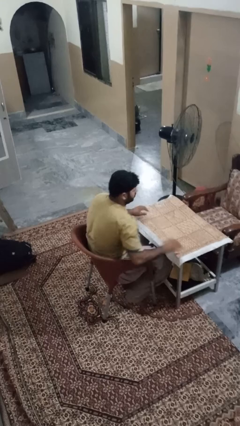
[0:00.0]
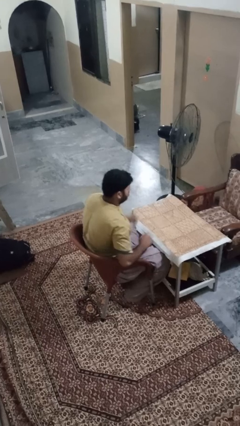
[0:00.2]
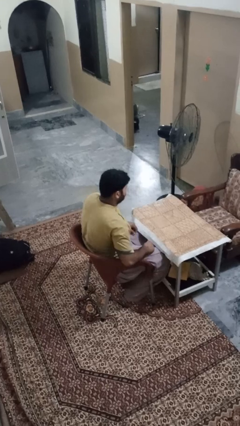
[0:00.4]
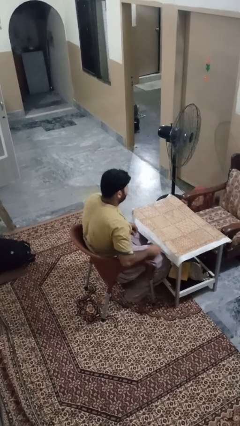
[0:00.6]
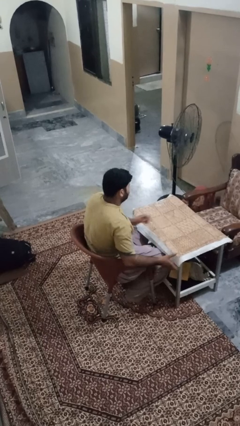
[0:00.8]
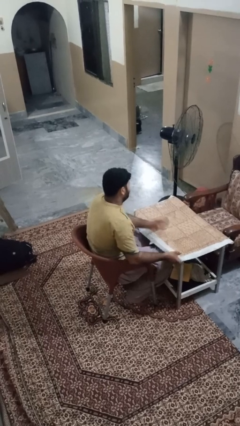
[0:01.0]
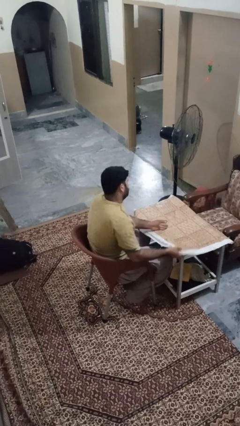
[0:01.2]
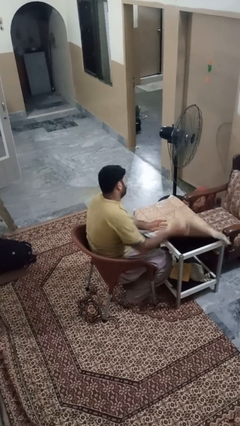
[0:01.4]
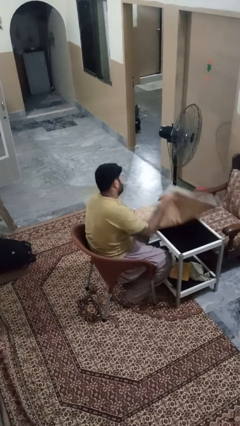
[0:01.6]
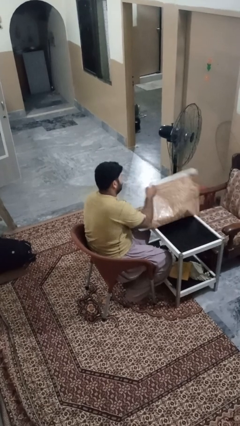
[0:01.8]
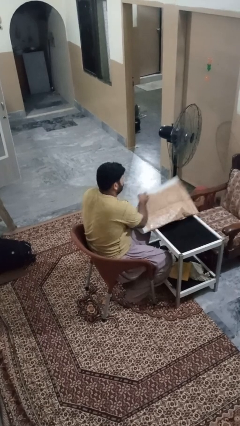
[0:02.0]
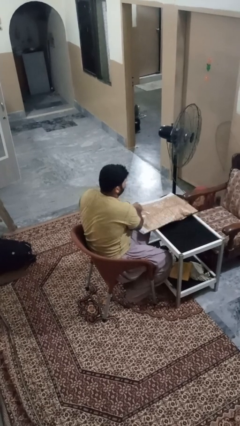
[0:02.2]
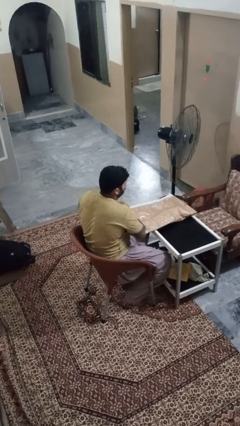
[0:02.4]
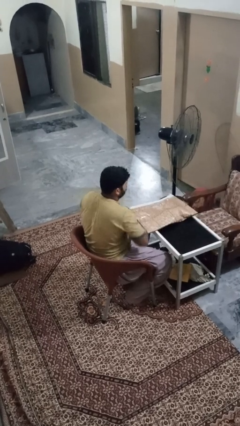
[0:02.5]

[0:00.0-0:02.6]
person folds tablecloth

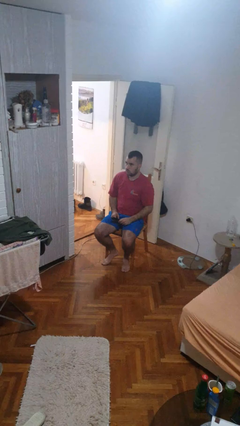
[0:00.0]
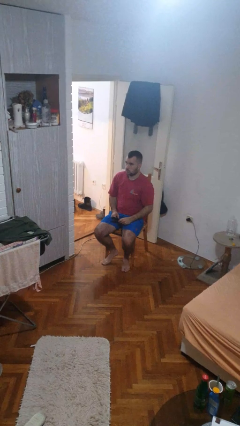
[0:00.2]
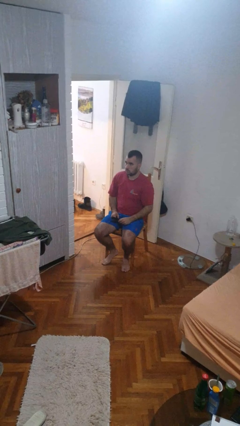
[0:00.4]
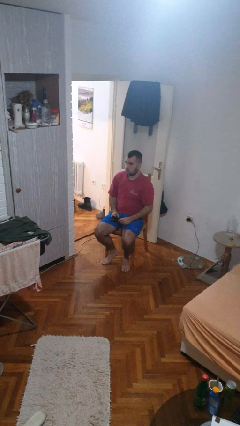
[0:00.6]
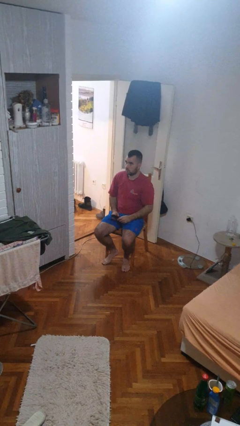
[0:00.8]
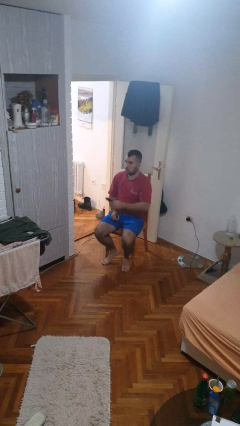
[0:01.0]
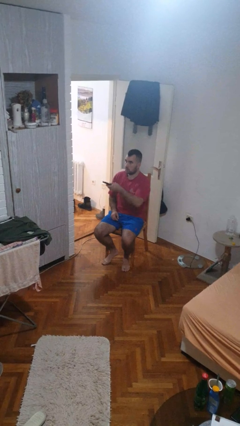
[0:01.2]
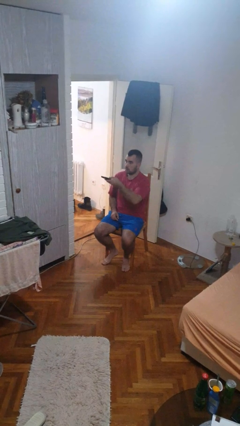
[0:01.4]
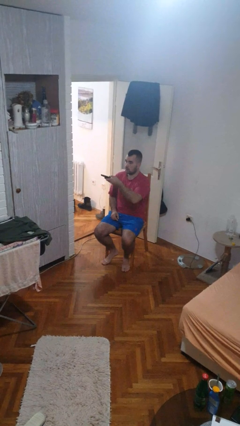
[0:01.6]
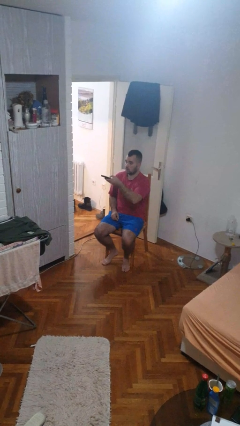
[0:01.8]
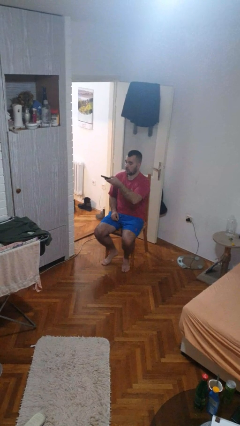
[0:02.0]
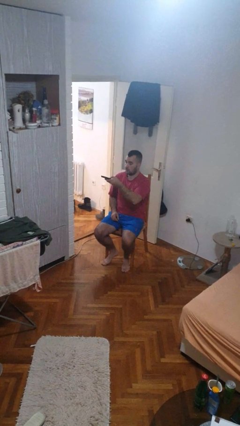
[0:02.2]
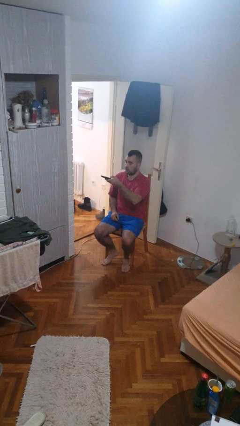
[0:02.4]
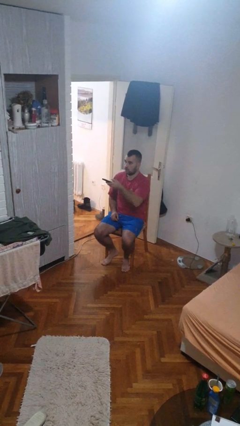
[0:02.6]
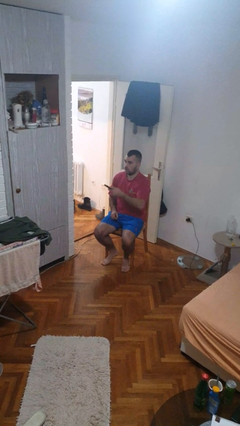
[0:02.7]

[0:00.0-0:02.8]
person uses television remote

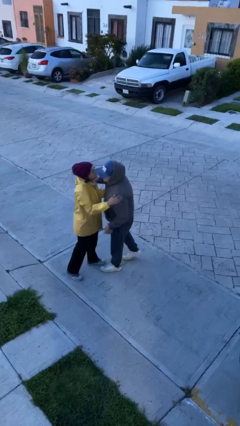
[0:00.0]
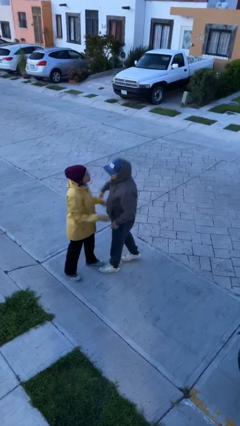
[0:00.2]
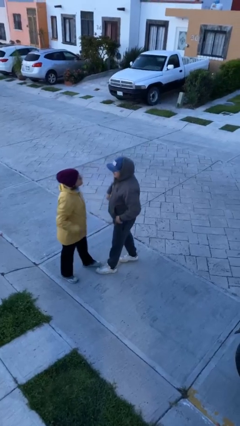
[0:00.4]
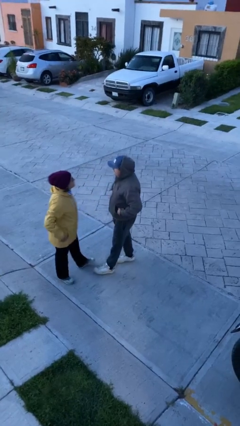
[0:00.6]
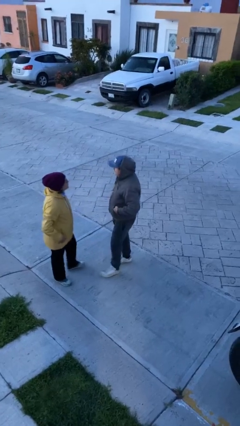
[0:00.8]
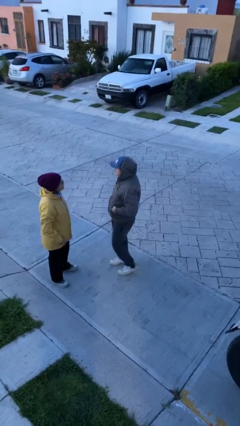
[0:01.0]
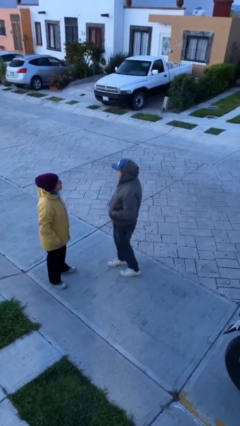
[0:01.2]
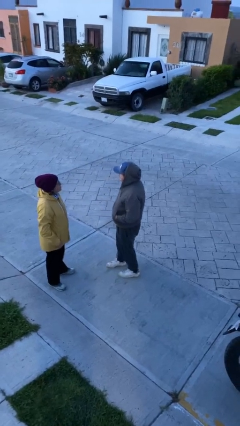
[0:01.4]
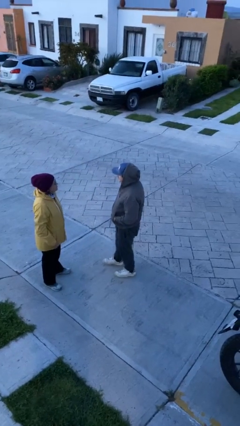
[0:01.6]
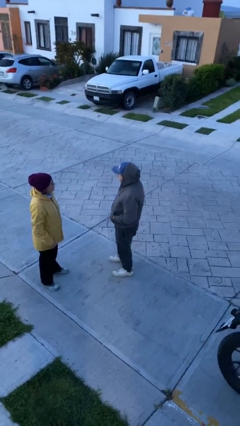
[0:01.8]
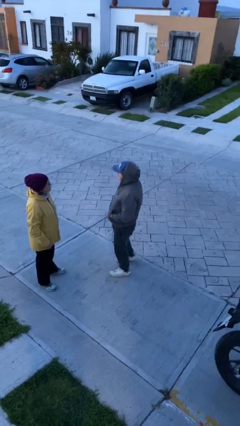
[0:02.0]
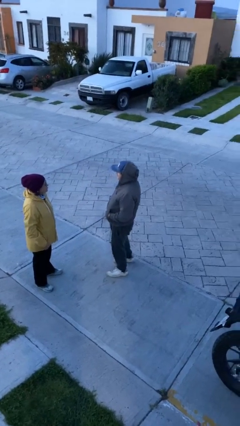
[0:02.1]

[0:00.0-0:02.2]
person talks to person

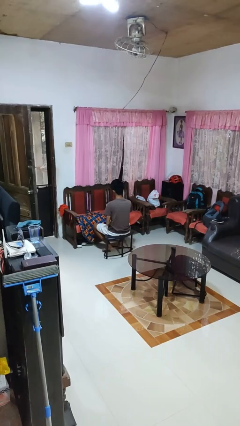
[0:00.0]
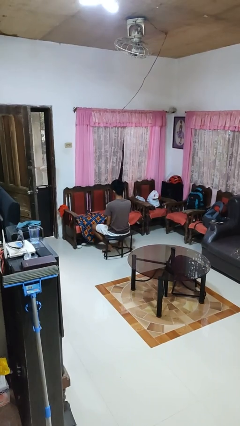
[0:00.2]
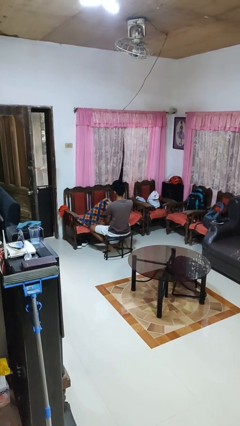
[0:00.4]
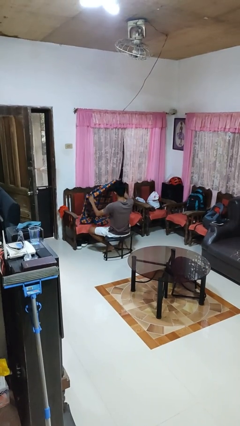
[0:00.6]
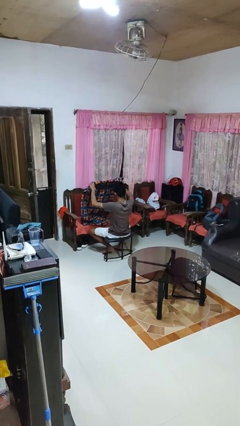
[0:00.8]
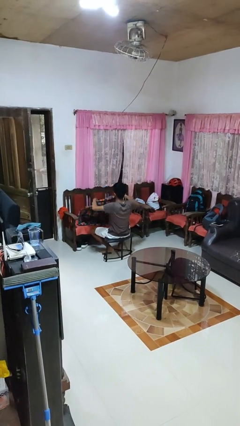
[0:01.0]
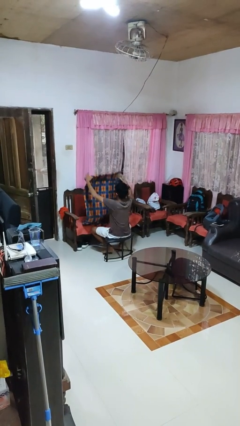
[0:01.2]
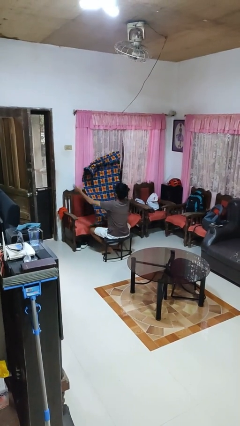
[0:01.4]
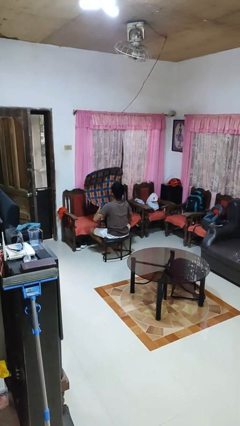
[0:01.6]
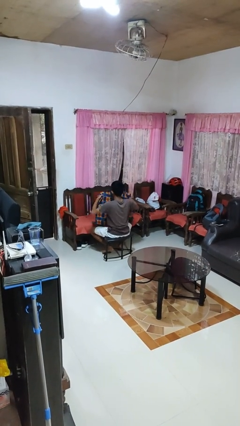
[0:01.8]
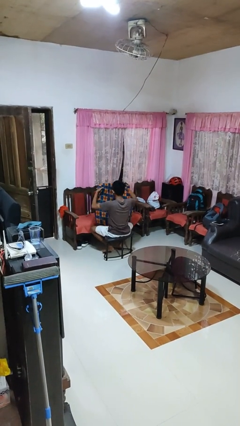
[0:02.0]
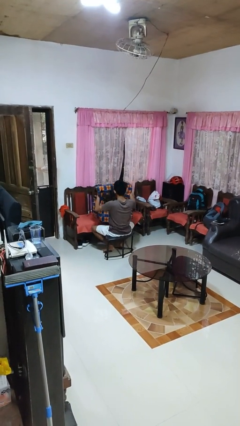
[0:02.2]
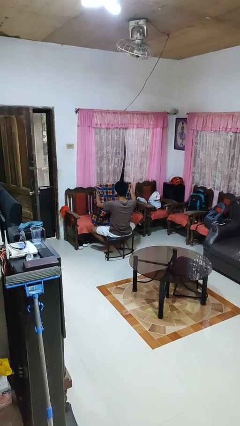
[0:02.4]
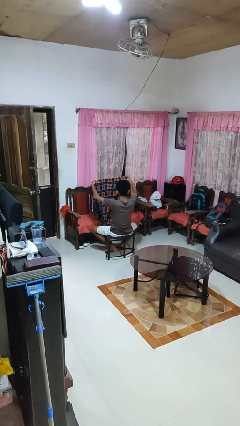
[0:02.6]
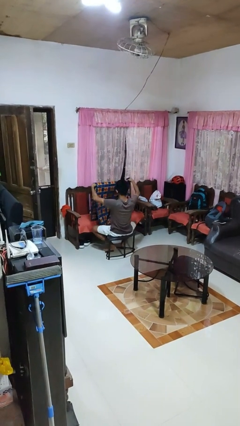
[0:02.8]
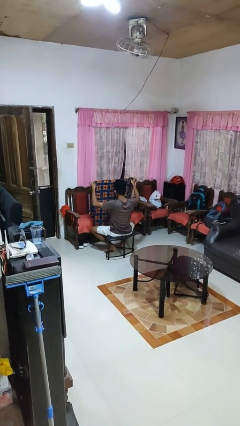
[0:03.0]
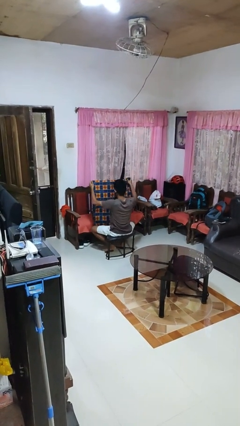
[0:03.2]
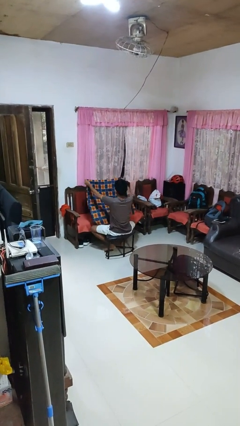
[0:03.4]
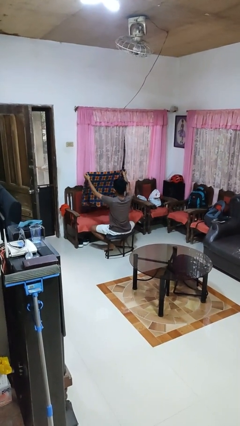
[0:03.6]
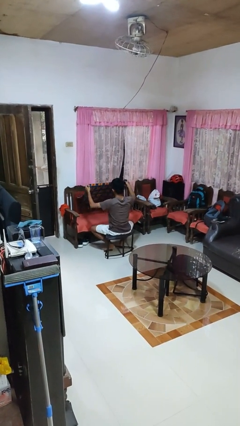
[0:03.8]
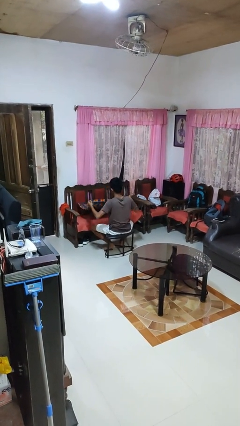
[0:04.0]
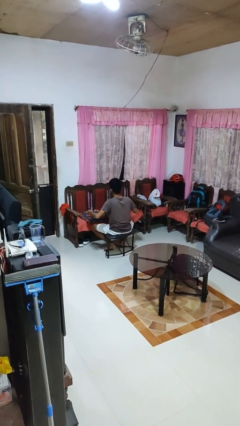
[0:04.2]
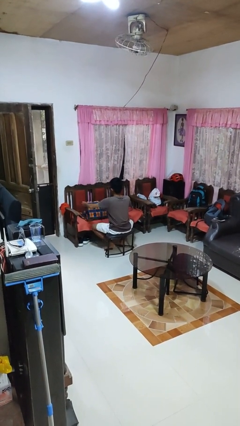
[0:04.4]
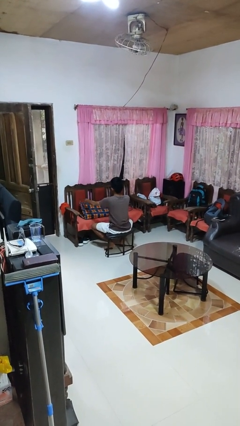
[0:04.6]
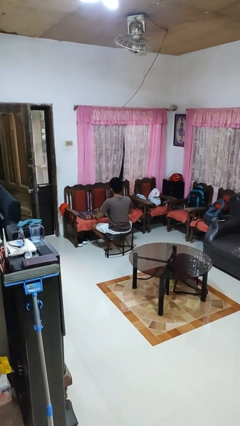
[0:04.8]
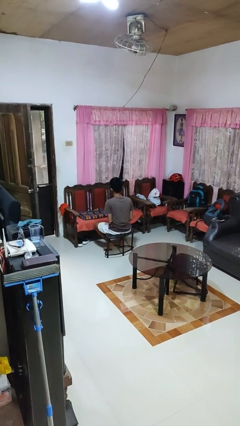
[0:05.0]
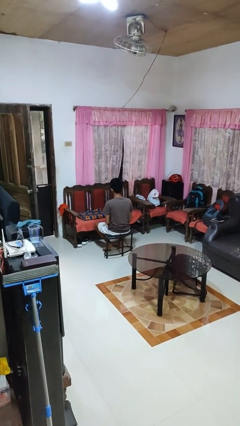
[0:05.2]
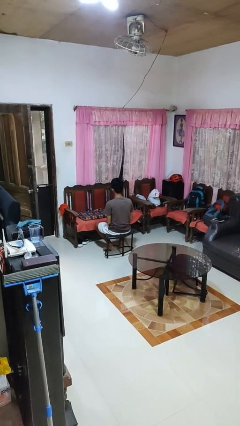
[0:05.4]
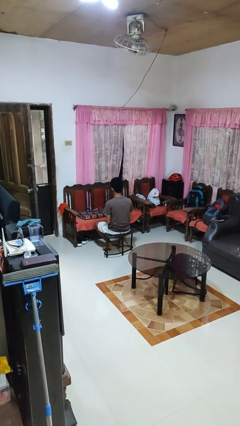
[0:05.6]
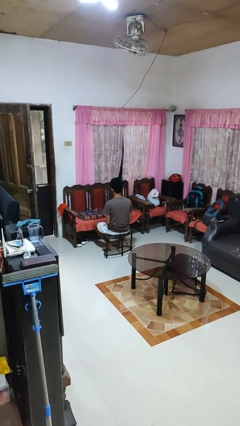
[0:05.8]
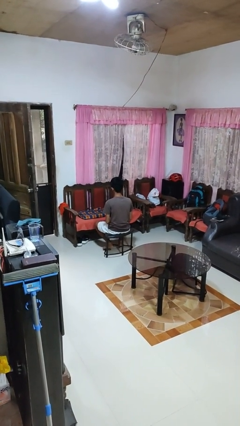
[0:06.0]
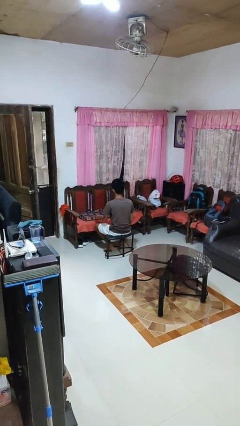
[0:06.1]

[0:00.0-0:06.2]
person folds blanket

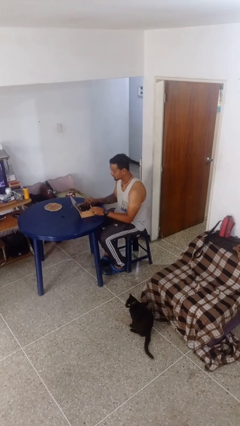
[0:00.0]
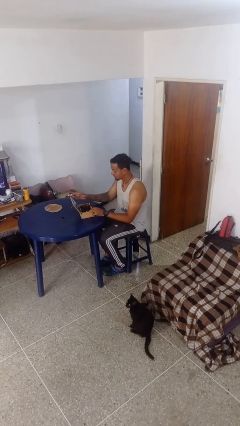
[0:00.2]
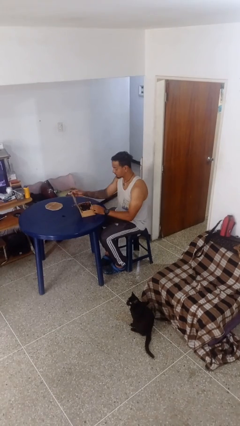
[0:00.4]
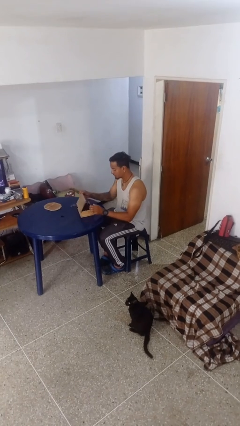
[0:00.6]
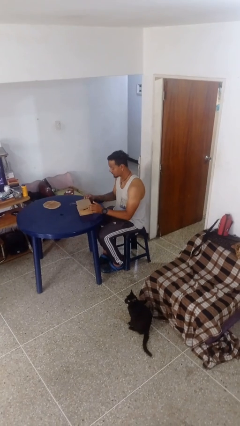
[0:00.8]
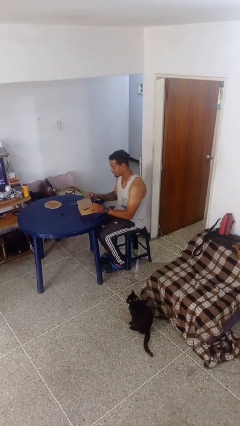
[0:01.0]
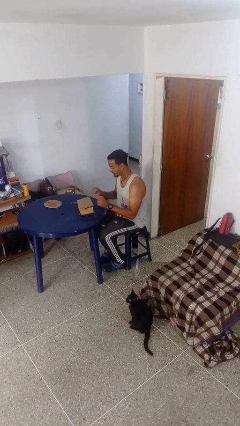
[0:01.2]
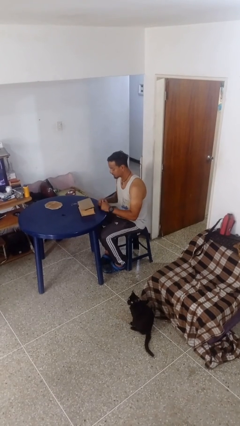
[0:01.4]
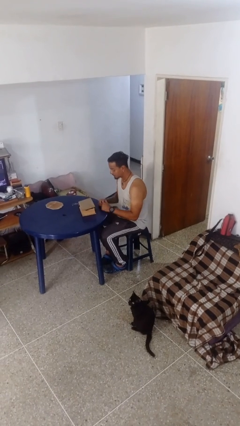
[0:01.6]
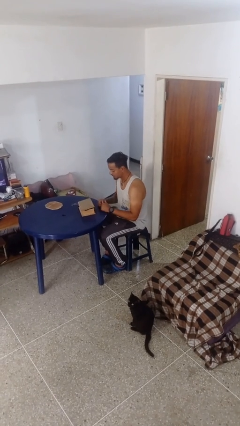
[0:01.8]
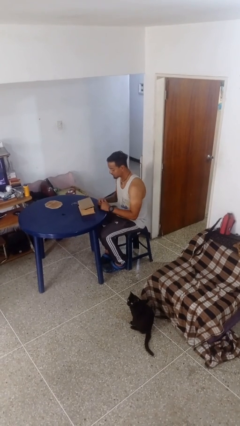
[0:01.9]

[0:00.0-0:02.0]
person closes jewelry box

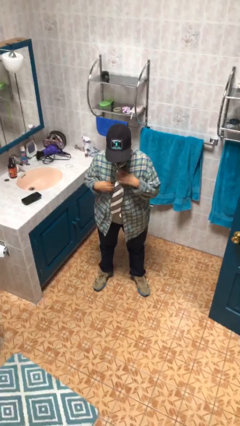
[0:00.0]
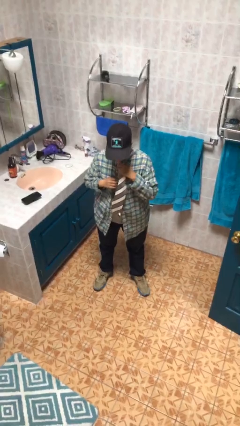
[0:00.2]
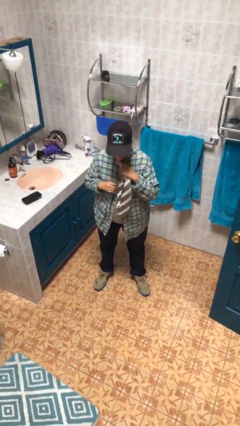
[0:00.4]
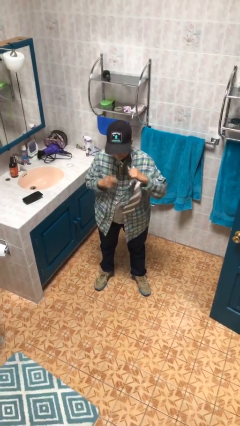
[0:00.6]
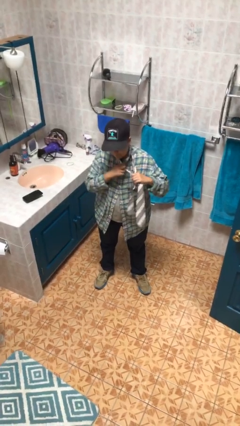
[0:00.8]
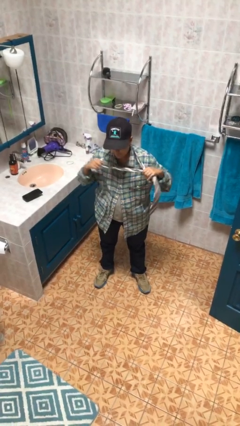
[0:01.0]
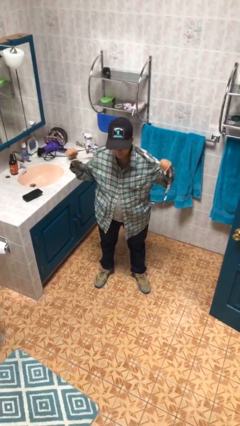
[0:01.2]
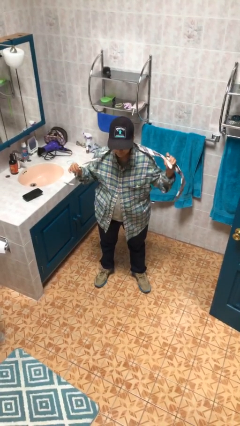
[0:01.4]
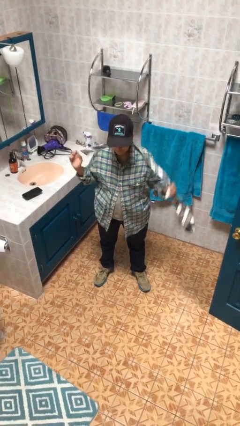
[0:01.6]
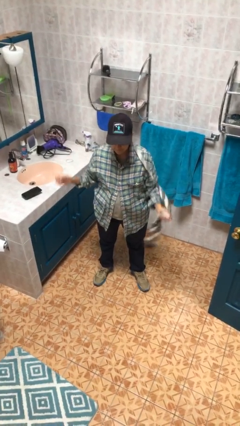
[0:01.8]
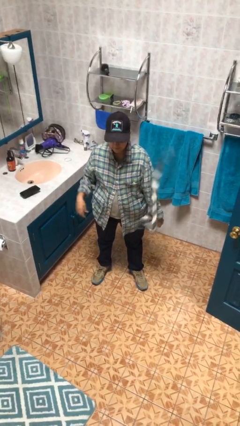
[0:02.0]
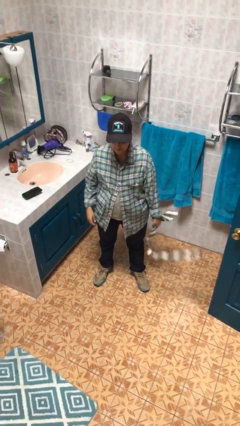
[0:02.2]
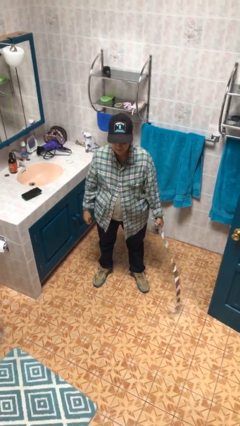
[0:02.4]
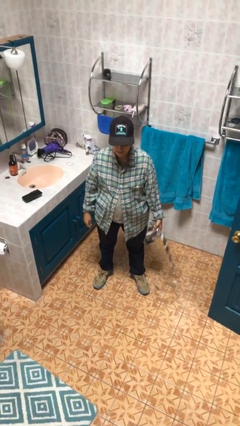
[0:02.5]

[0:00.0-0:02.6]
person takes off necktie
